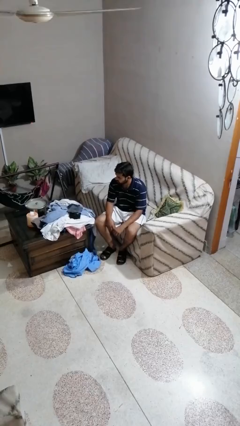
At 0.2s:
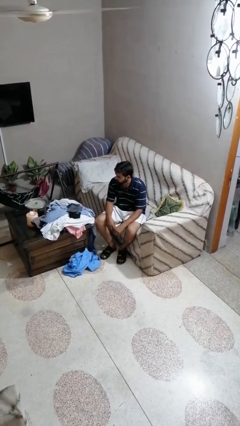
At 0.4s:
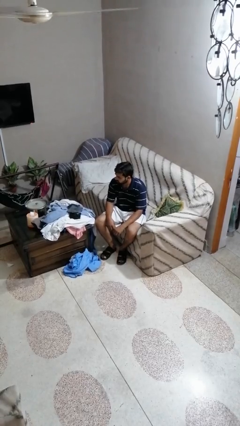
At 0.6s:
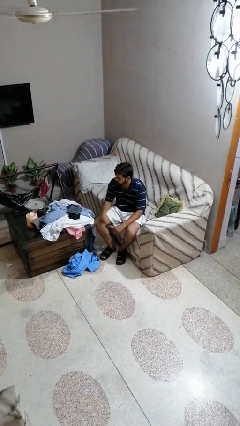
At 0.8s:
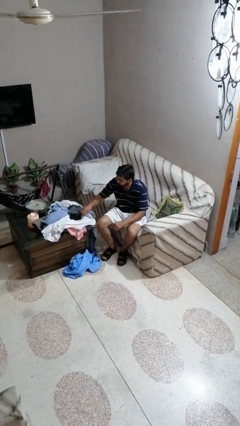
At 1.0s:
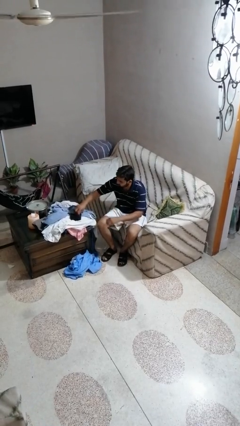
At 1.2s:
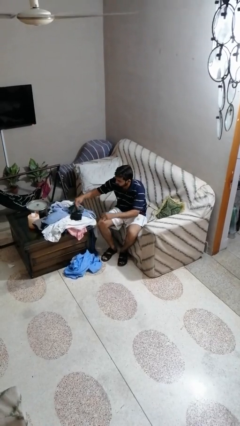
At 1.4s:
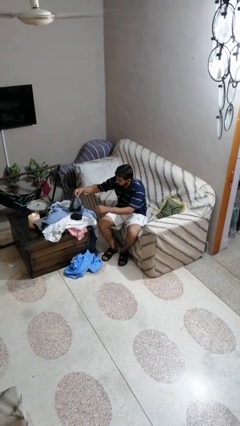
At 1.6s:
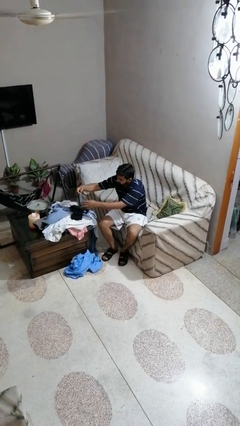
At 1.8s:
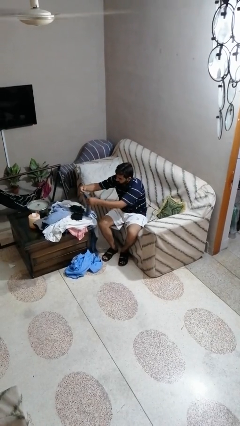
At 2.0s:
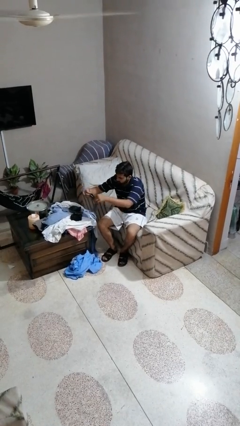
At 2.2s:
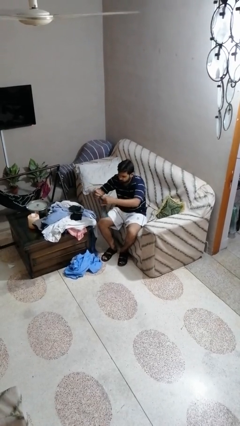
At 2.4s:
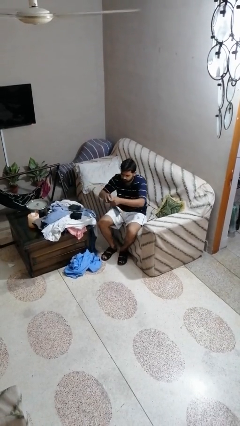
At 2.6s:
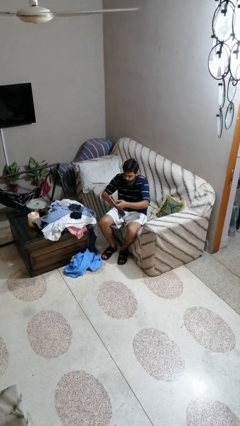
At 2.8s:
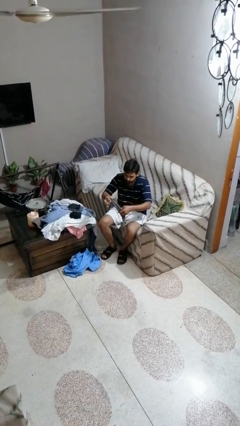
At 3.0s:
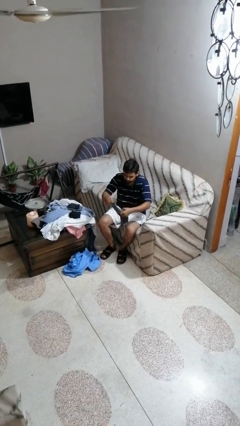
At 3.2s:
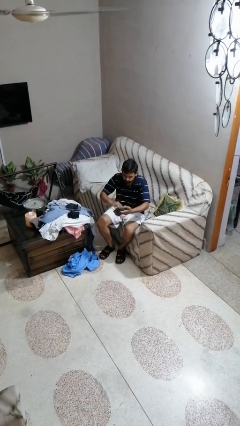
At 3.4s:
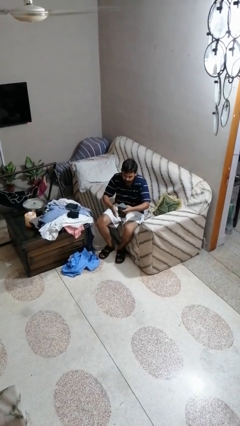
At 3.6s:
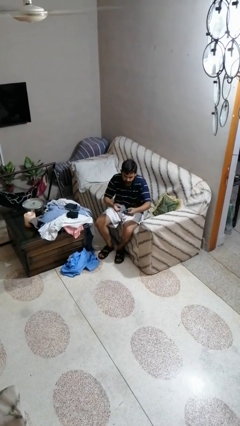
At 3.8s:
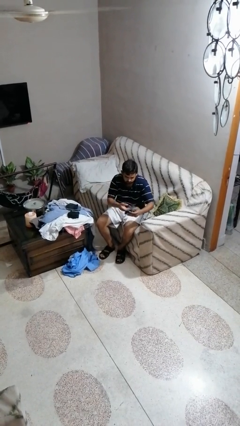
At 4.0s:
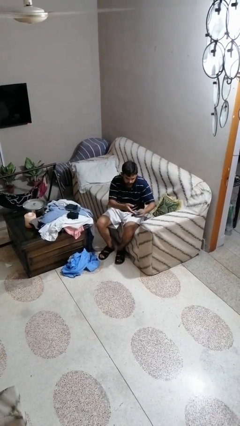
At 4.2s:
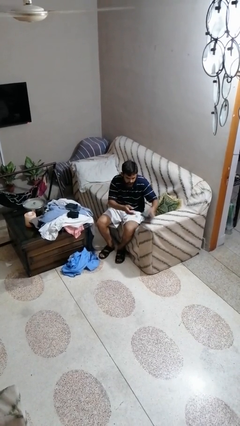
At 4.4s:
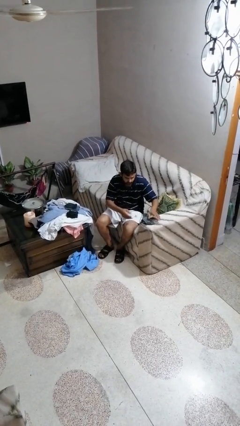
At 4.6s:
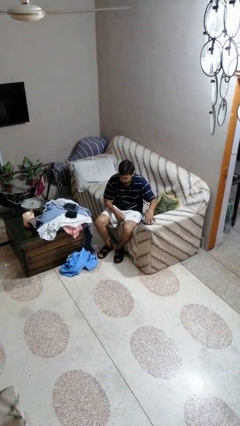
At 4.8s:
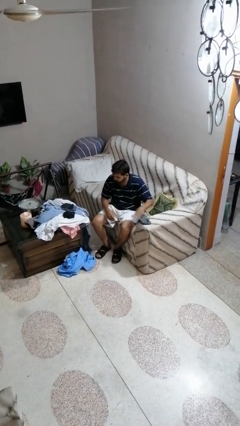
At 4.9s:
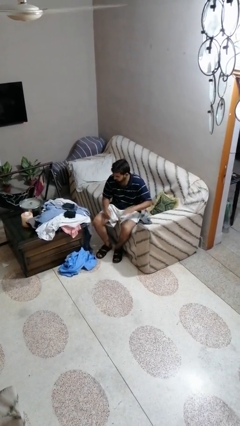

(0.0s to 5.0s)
person folds socks

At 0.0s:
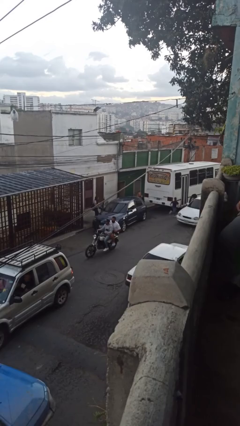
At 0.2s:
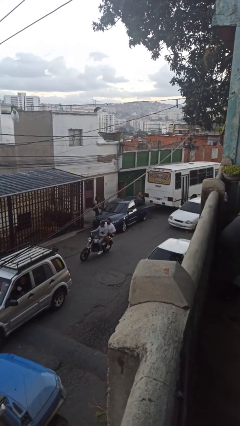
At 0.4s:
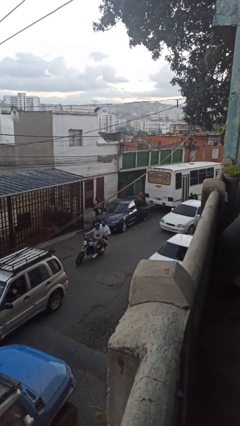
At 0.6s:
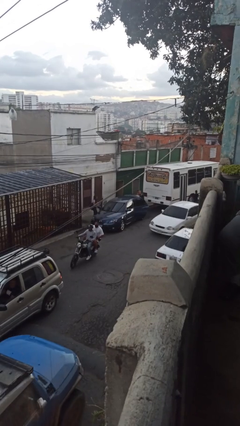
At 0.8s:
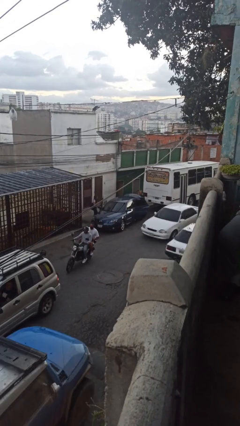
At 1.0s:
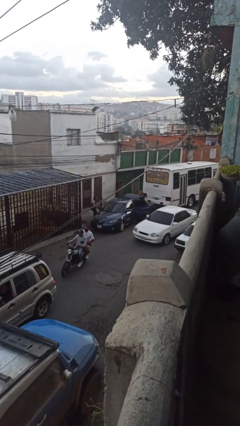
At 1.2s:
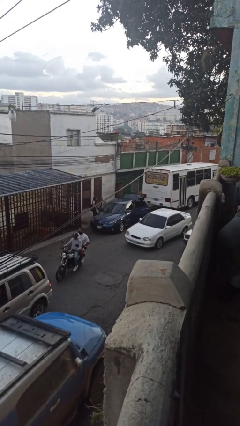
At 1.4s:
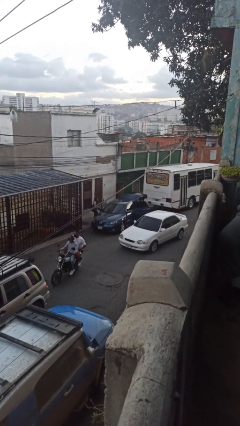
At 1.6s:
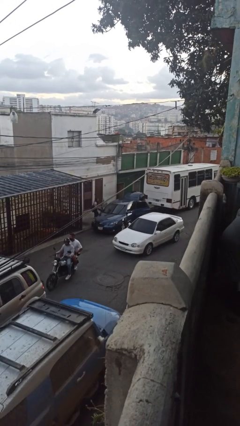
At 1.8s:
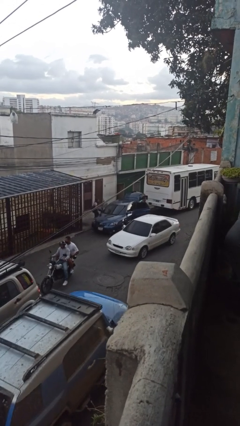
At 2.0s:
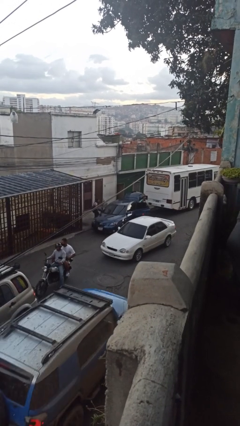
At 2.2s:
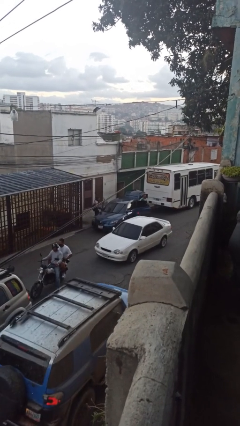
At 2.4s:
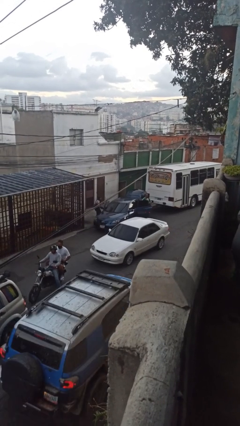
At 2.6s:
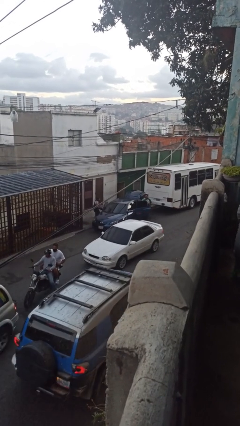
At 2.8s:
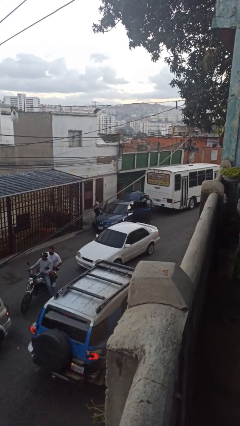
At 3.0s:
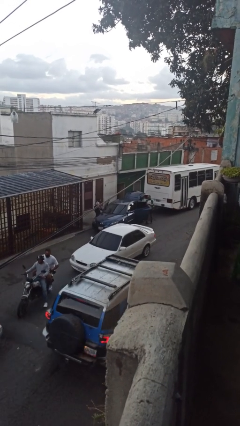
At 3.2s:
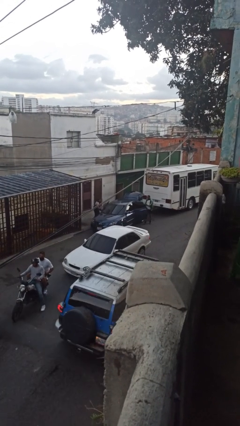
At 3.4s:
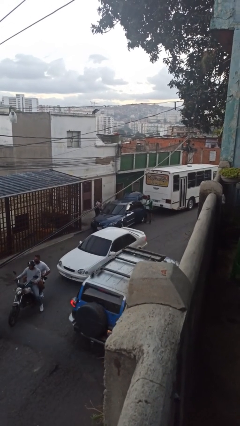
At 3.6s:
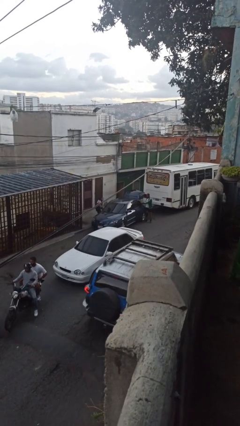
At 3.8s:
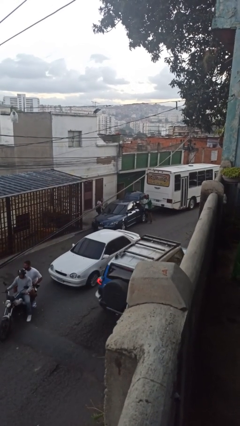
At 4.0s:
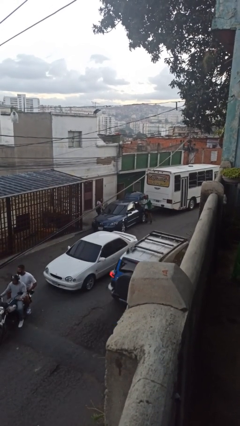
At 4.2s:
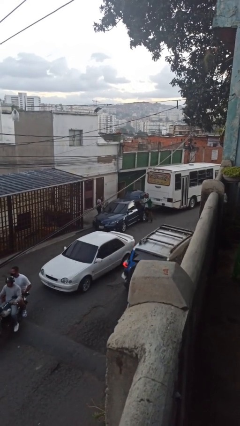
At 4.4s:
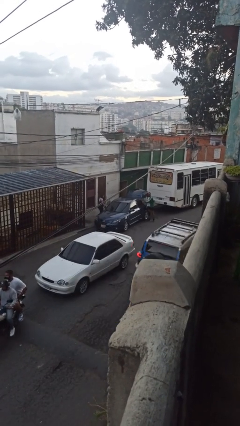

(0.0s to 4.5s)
car drops off person

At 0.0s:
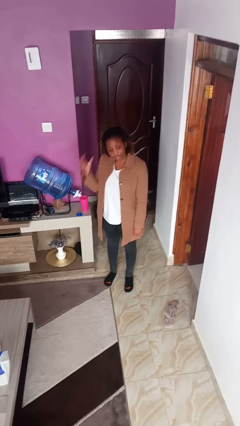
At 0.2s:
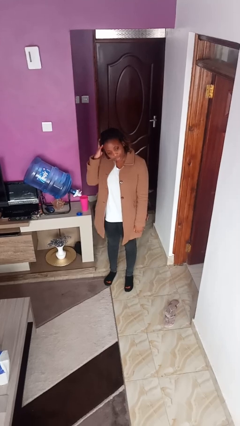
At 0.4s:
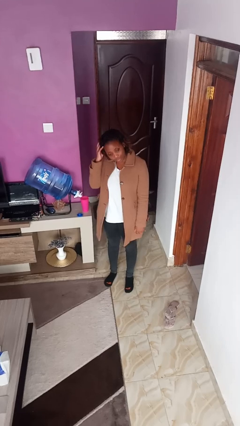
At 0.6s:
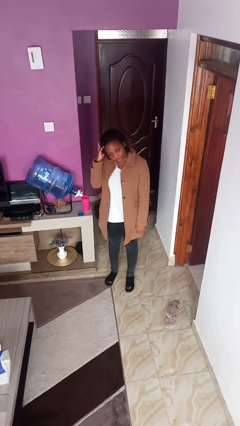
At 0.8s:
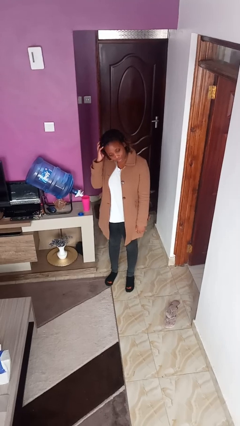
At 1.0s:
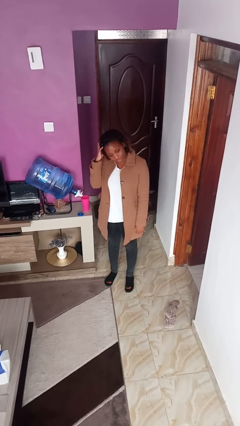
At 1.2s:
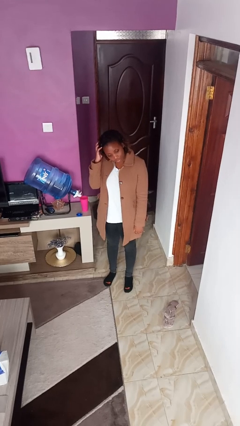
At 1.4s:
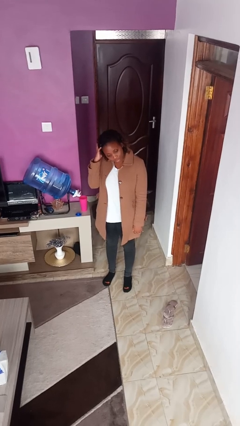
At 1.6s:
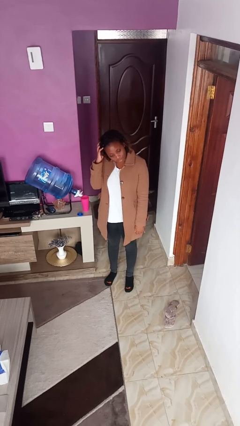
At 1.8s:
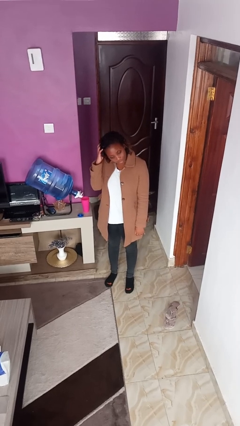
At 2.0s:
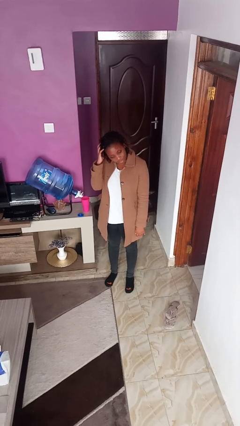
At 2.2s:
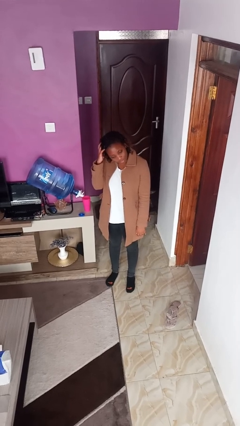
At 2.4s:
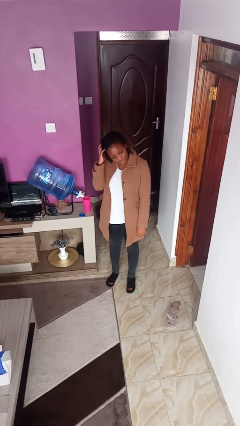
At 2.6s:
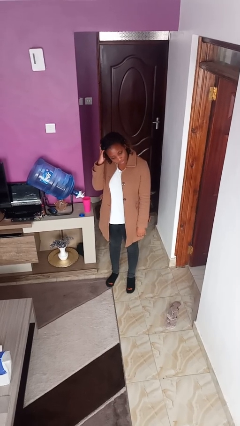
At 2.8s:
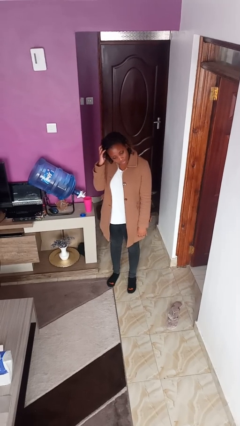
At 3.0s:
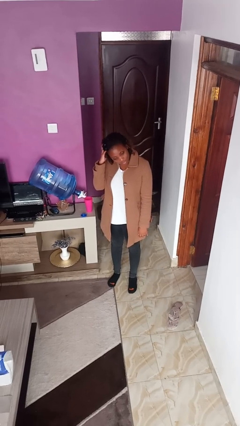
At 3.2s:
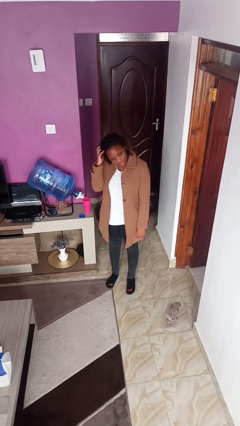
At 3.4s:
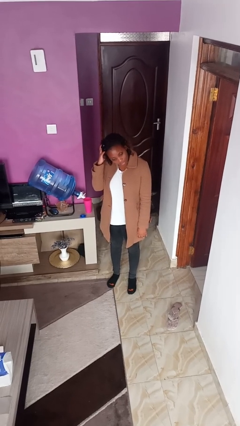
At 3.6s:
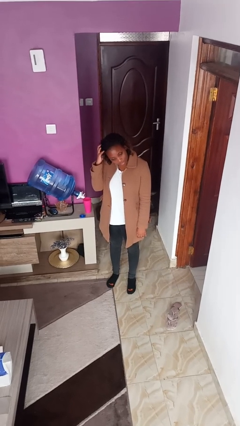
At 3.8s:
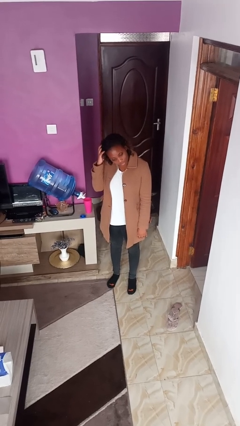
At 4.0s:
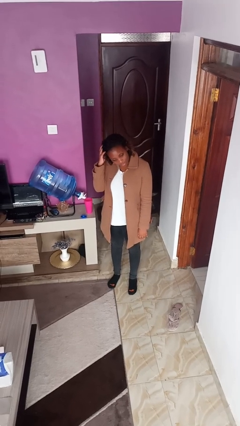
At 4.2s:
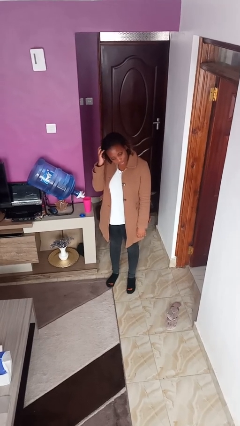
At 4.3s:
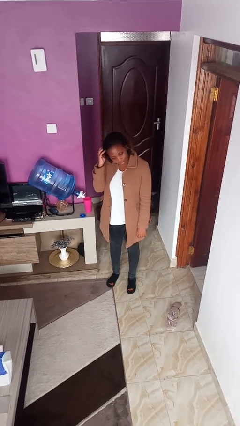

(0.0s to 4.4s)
person scratches face

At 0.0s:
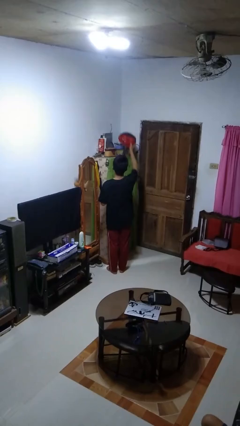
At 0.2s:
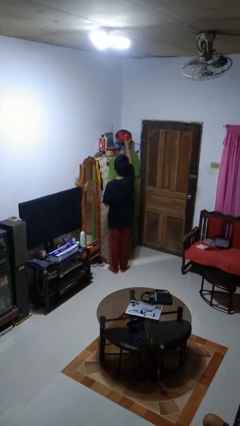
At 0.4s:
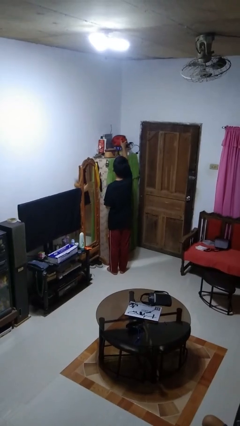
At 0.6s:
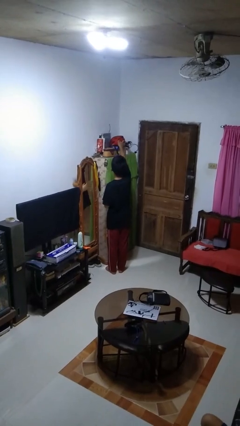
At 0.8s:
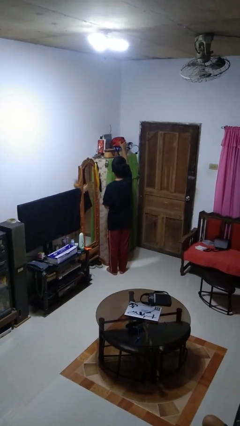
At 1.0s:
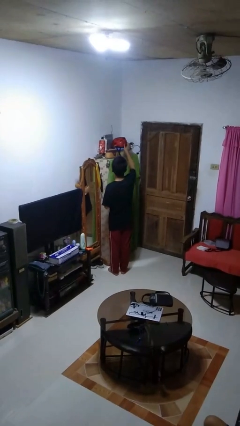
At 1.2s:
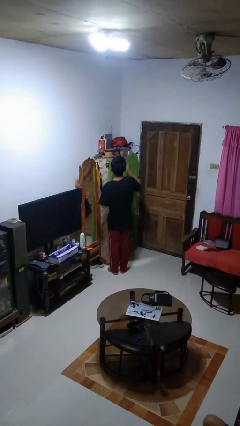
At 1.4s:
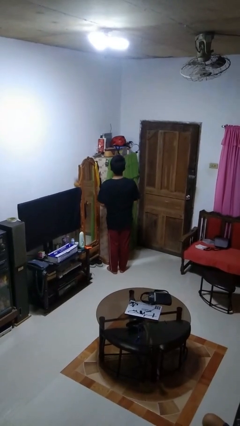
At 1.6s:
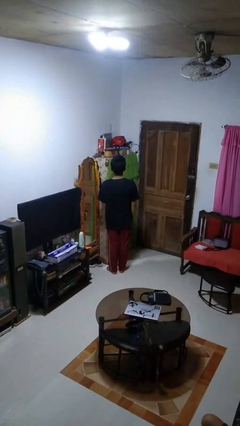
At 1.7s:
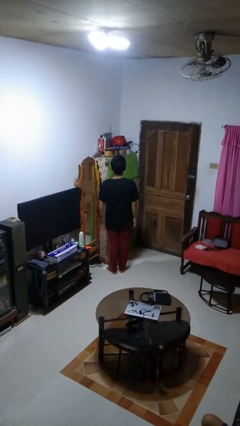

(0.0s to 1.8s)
person puts down object on shelf

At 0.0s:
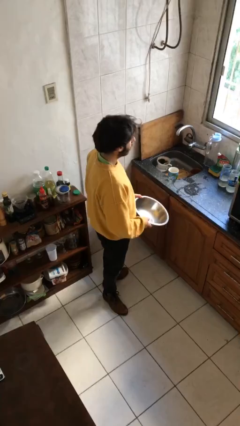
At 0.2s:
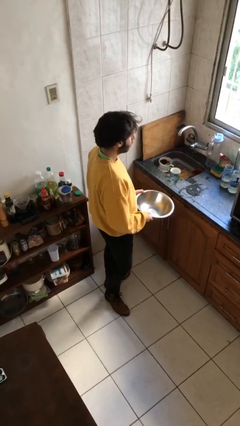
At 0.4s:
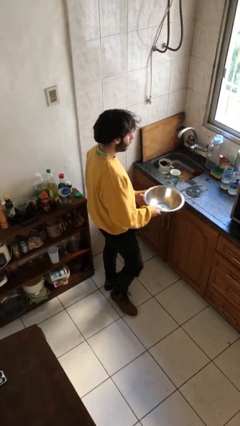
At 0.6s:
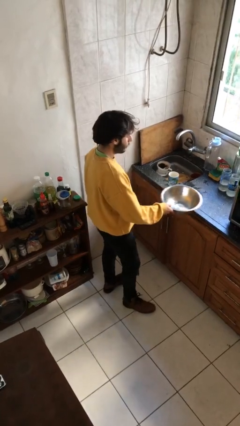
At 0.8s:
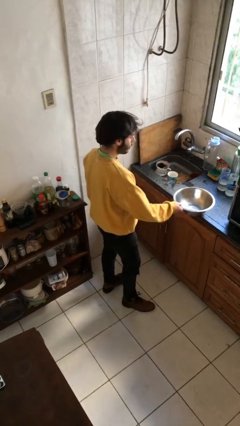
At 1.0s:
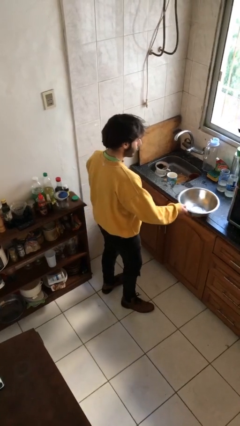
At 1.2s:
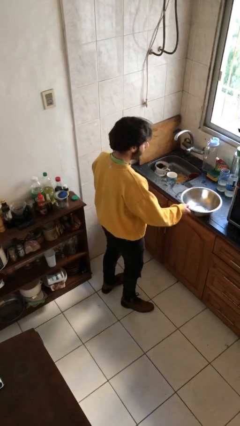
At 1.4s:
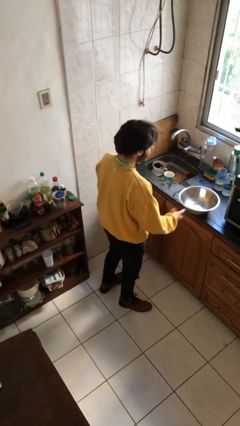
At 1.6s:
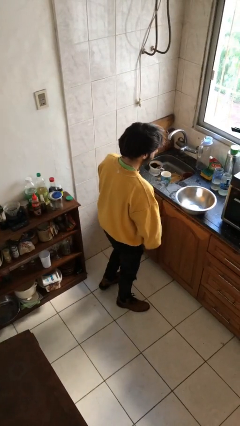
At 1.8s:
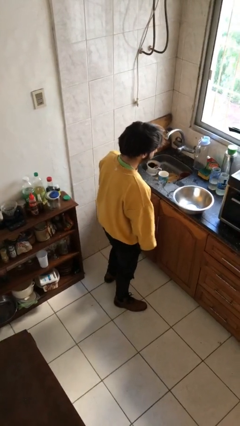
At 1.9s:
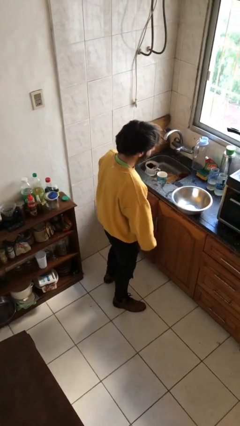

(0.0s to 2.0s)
person puts down object on countertop
